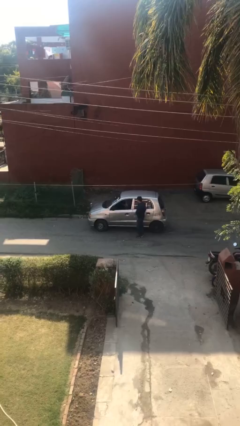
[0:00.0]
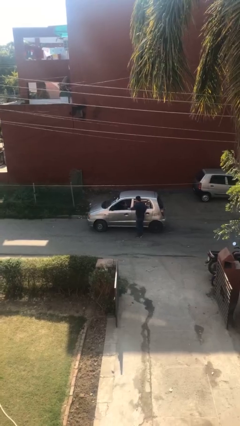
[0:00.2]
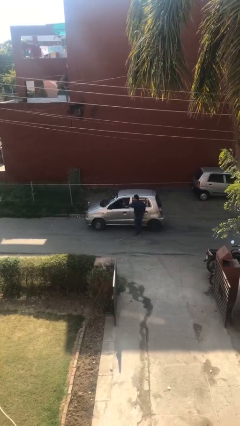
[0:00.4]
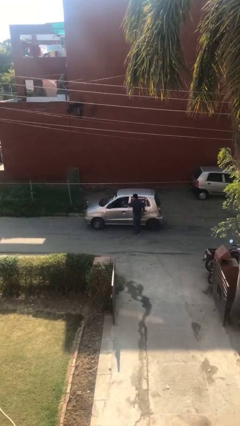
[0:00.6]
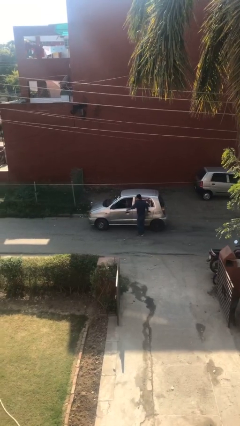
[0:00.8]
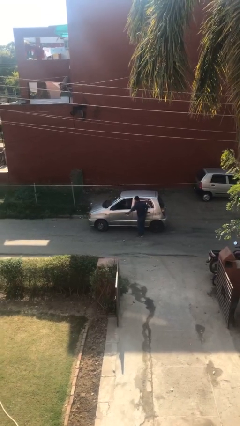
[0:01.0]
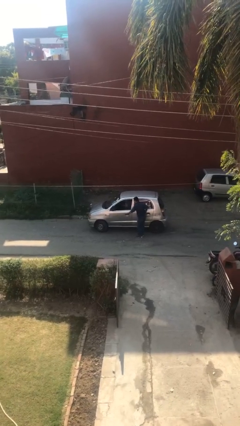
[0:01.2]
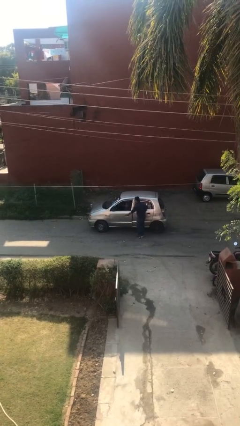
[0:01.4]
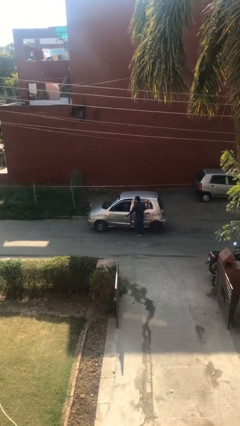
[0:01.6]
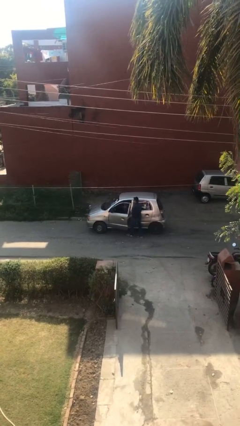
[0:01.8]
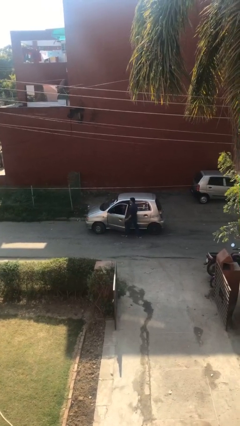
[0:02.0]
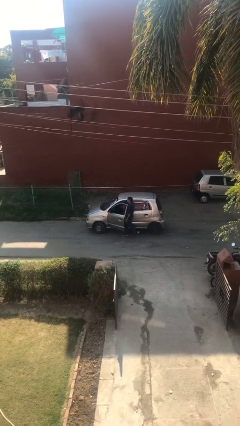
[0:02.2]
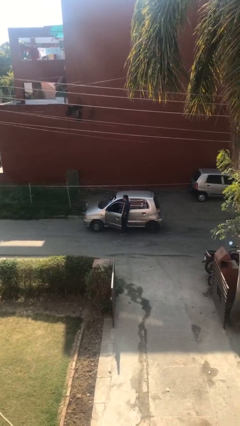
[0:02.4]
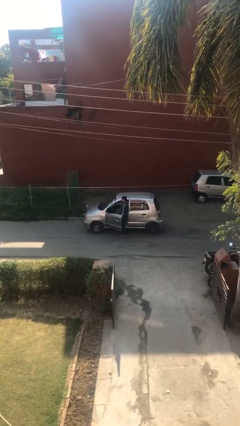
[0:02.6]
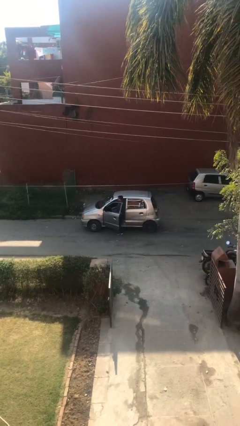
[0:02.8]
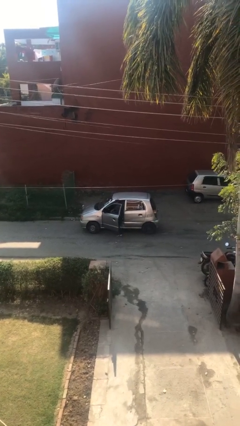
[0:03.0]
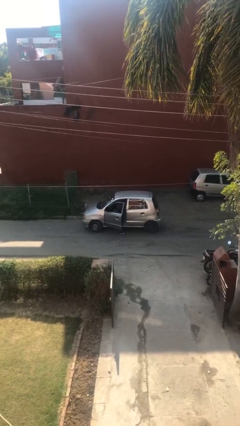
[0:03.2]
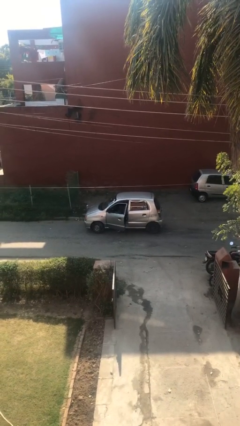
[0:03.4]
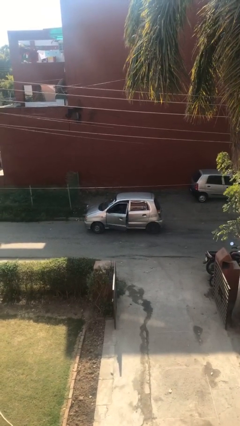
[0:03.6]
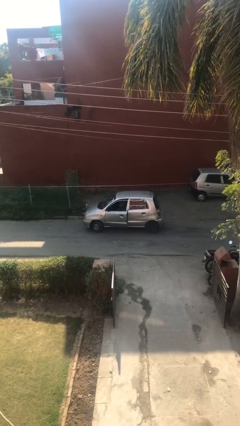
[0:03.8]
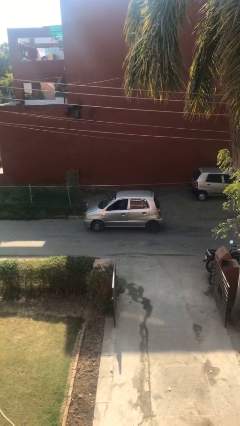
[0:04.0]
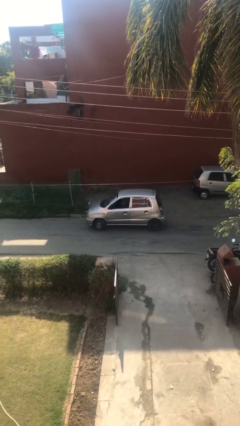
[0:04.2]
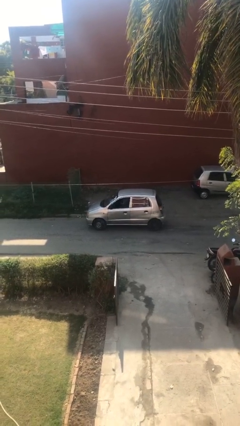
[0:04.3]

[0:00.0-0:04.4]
car picks up person

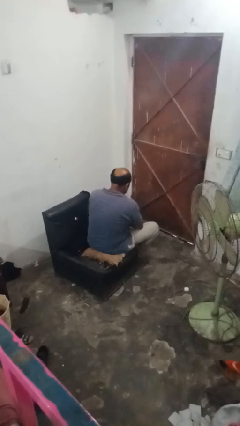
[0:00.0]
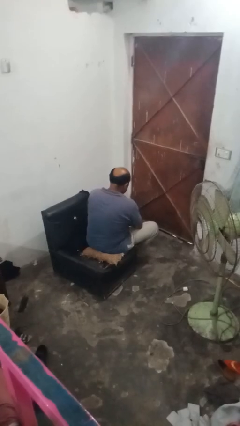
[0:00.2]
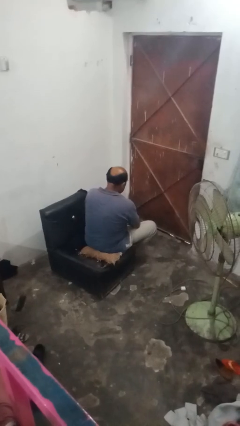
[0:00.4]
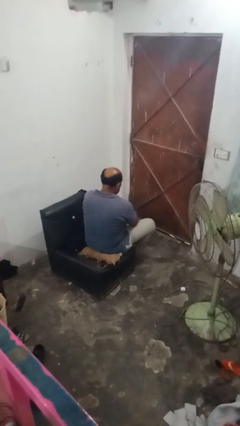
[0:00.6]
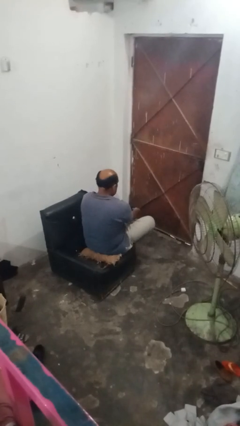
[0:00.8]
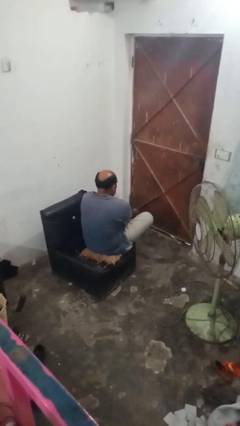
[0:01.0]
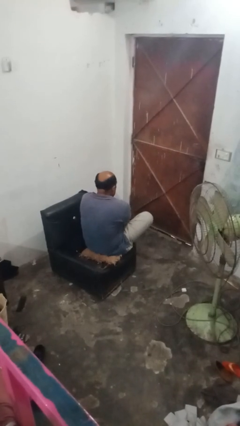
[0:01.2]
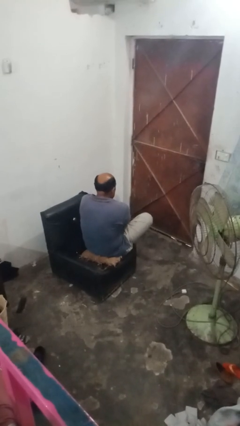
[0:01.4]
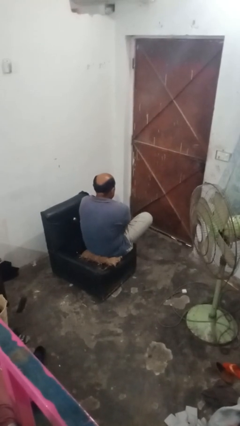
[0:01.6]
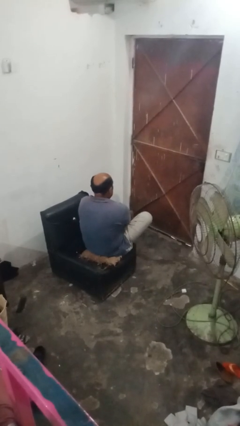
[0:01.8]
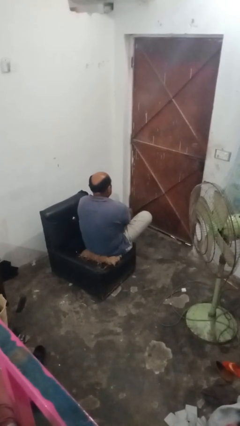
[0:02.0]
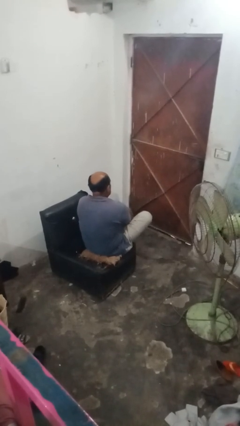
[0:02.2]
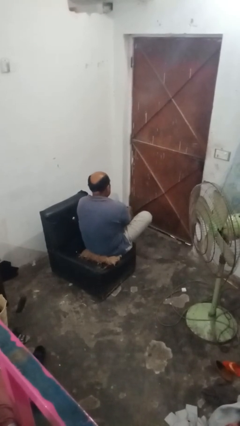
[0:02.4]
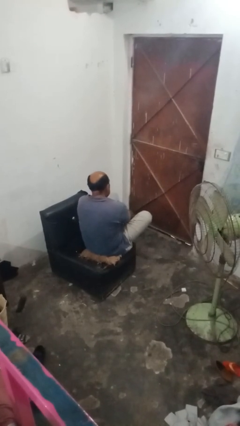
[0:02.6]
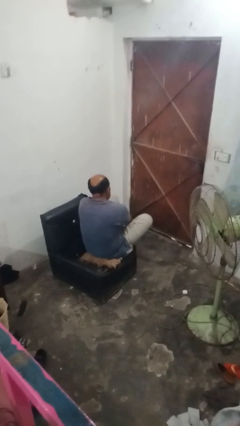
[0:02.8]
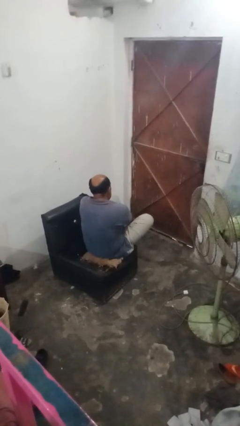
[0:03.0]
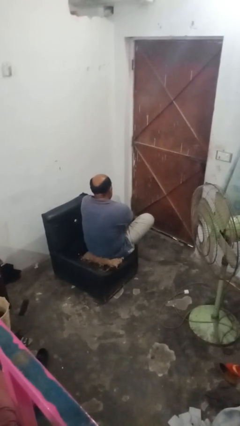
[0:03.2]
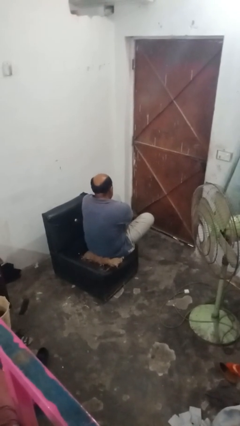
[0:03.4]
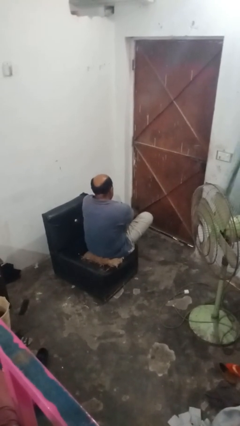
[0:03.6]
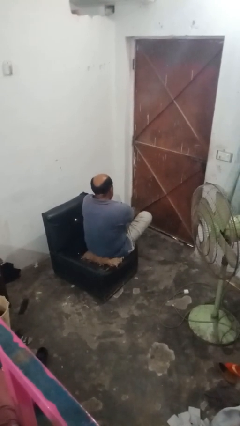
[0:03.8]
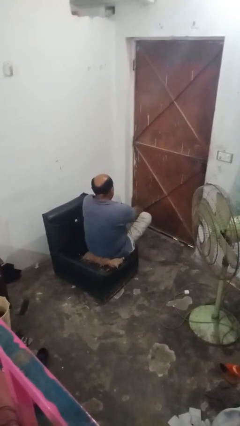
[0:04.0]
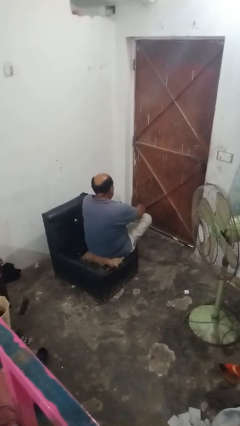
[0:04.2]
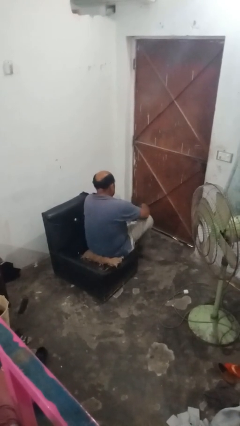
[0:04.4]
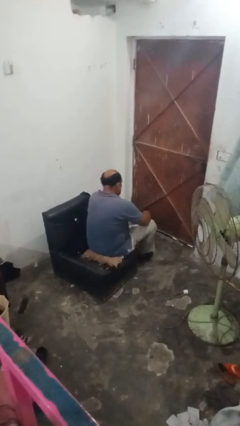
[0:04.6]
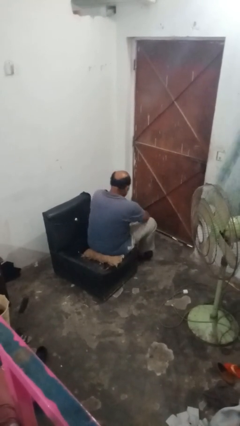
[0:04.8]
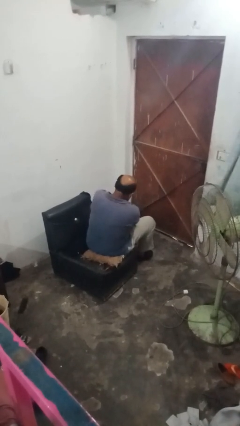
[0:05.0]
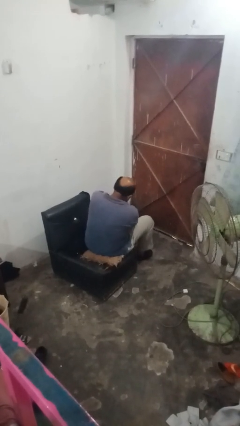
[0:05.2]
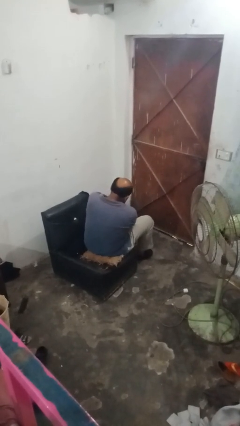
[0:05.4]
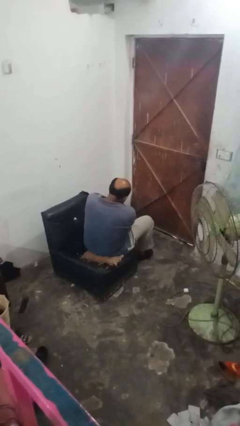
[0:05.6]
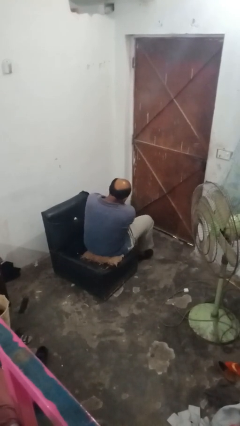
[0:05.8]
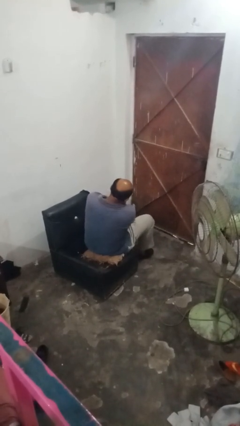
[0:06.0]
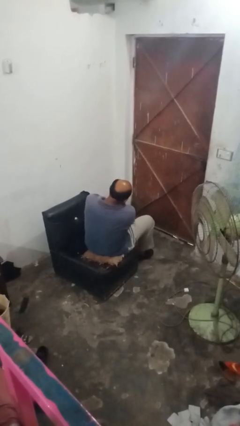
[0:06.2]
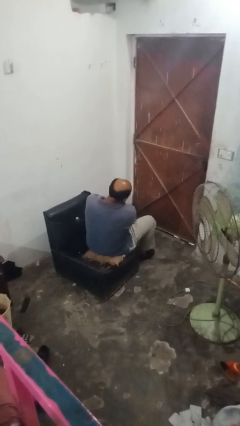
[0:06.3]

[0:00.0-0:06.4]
person puts on socks

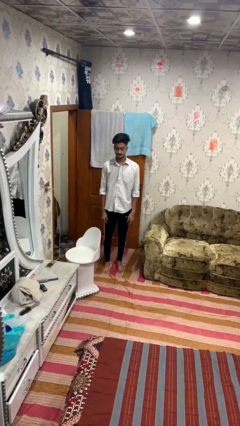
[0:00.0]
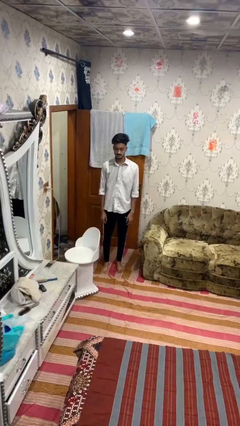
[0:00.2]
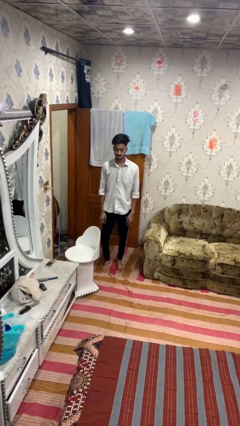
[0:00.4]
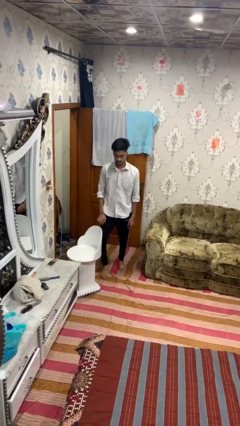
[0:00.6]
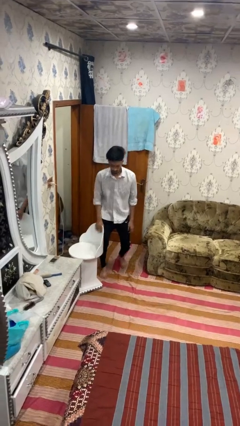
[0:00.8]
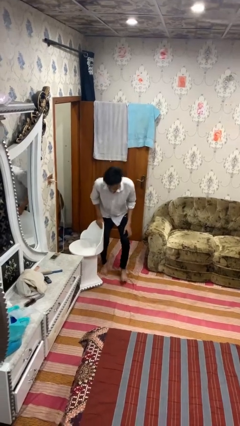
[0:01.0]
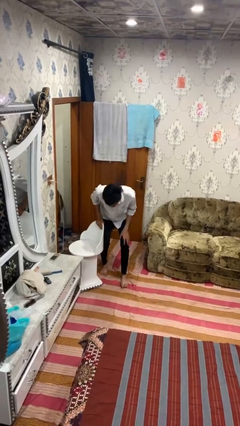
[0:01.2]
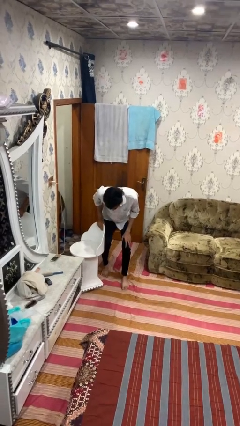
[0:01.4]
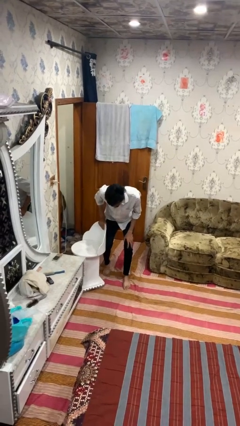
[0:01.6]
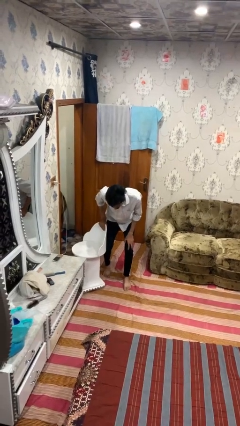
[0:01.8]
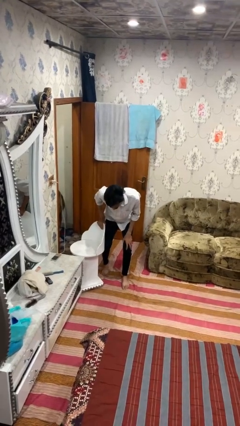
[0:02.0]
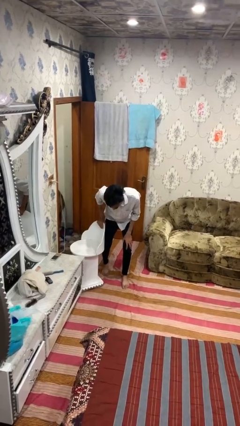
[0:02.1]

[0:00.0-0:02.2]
person trips on object on floor

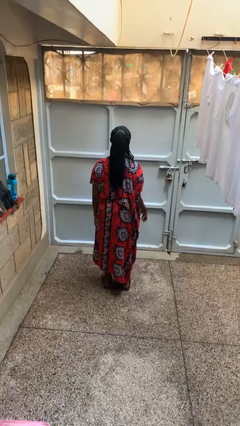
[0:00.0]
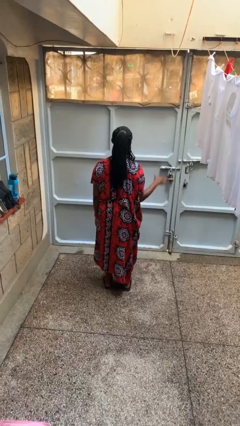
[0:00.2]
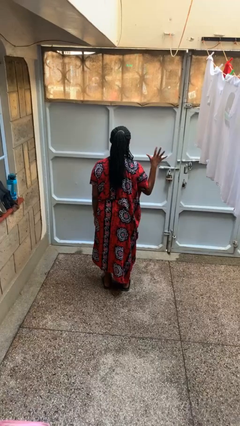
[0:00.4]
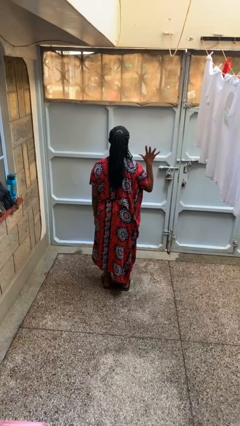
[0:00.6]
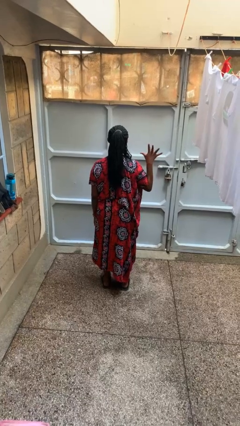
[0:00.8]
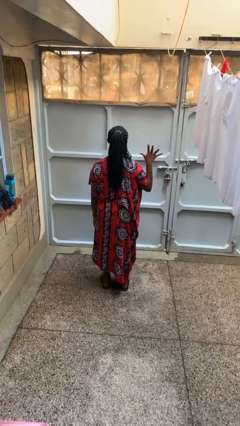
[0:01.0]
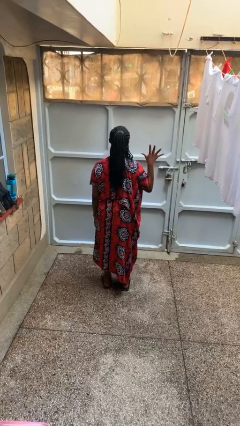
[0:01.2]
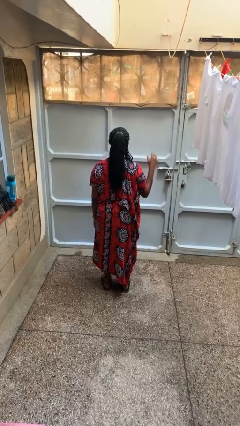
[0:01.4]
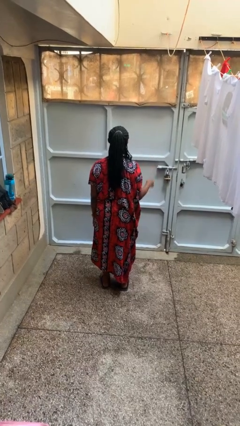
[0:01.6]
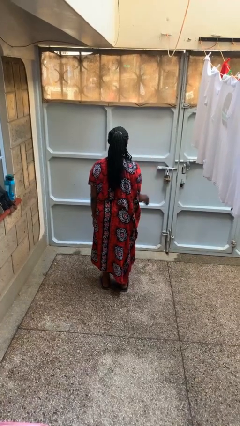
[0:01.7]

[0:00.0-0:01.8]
person gestures number five

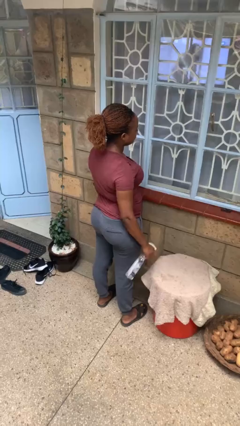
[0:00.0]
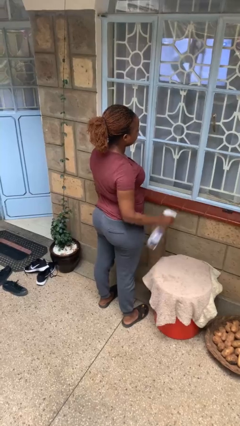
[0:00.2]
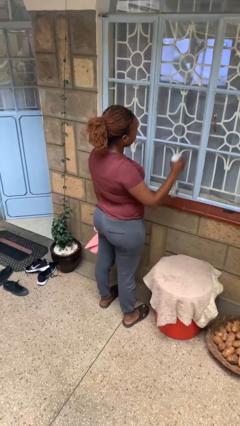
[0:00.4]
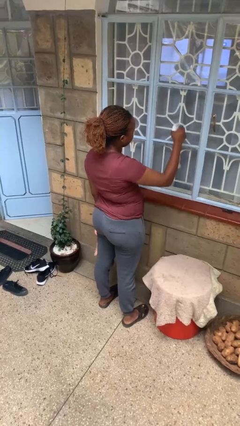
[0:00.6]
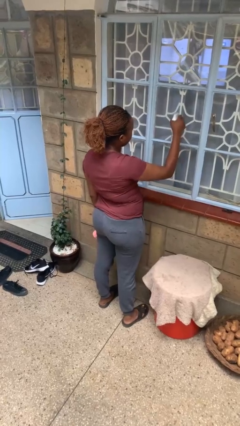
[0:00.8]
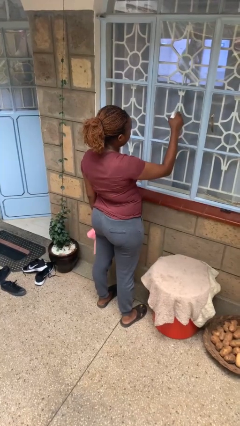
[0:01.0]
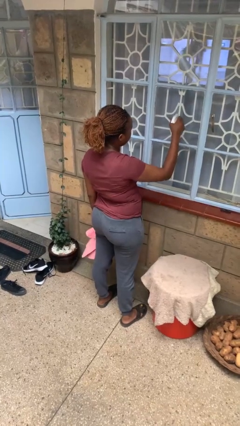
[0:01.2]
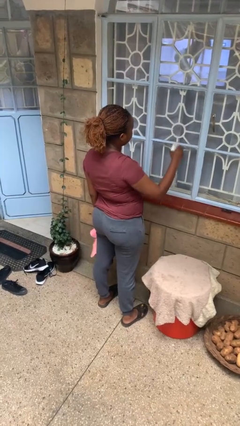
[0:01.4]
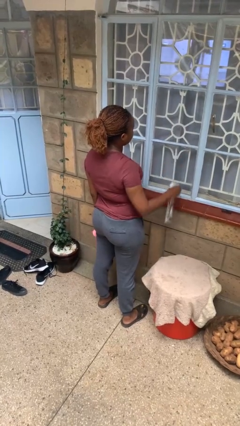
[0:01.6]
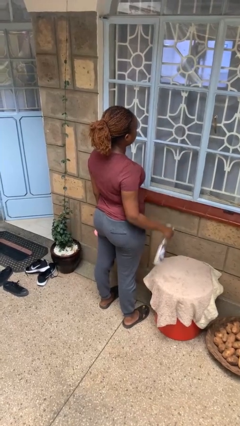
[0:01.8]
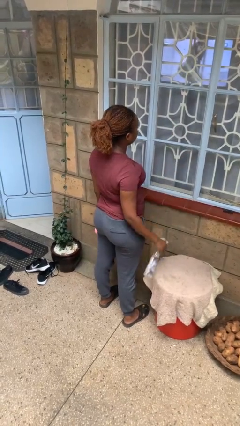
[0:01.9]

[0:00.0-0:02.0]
person sprays from bottle

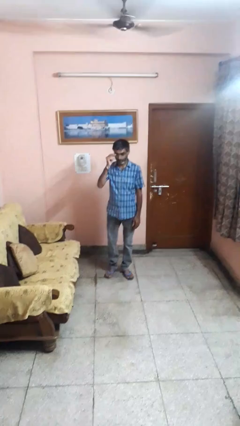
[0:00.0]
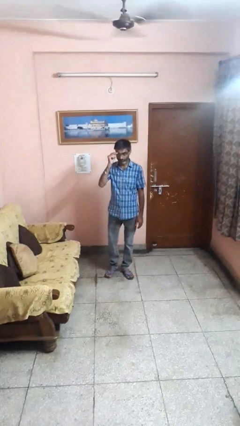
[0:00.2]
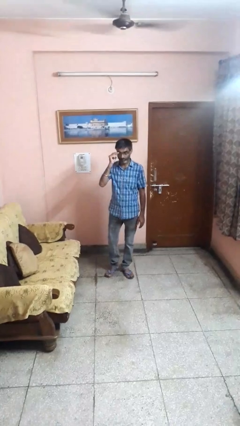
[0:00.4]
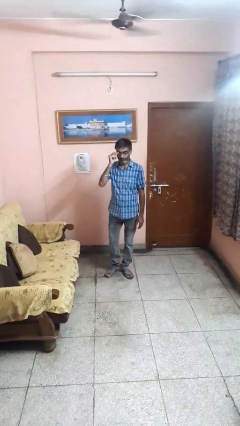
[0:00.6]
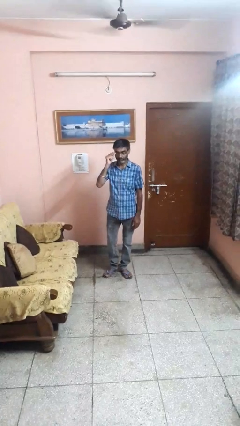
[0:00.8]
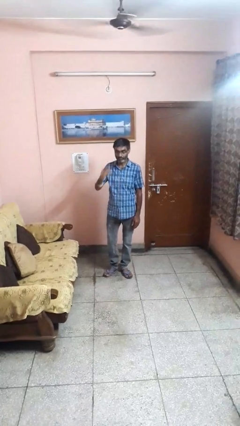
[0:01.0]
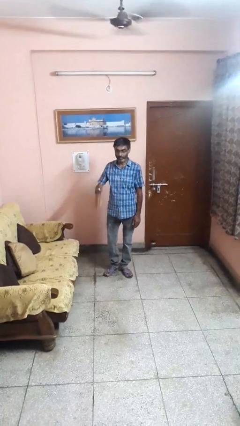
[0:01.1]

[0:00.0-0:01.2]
person puts on glasses
